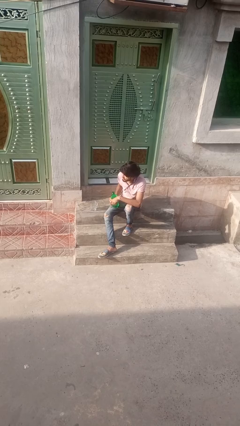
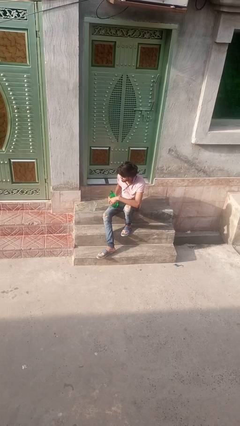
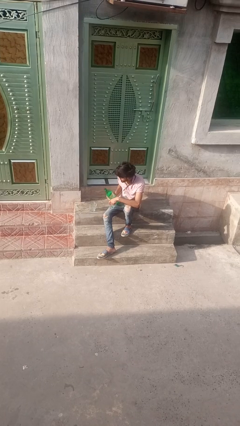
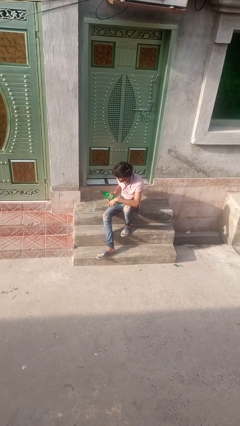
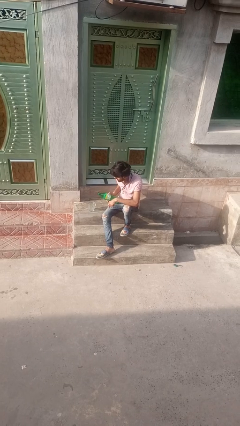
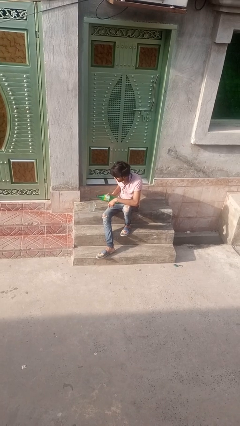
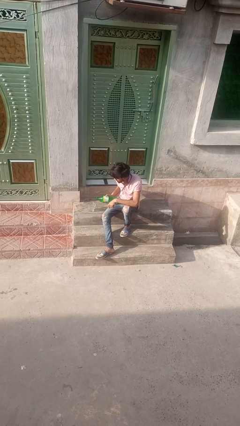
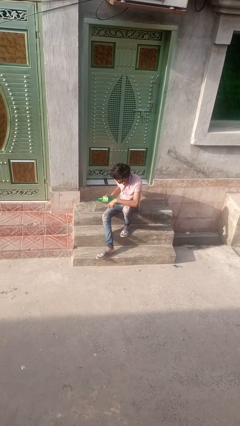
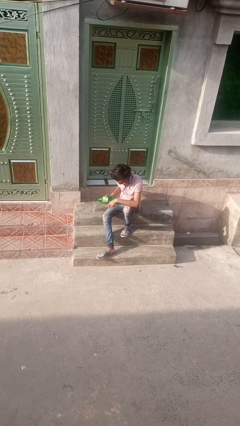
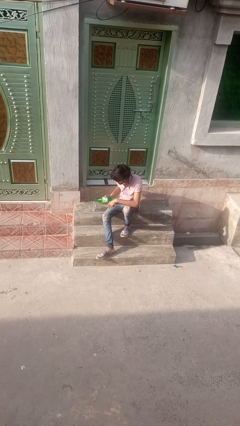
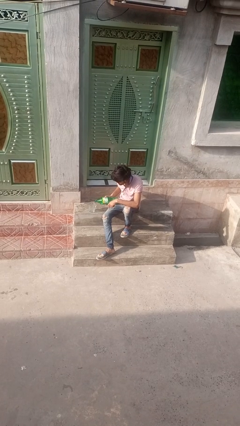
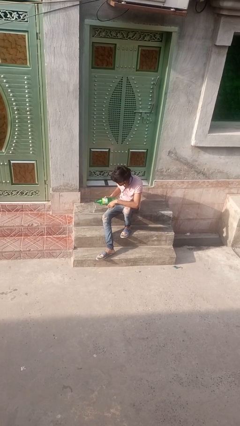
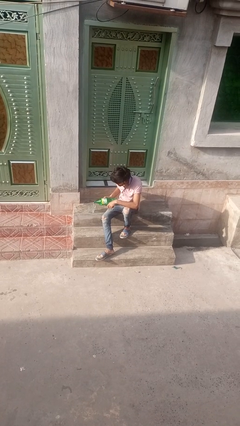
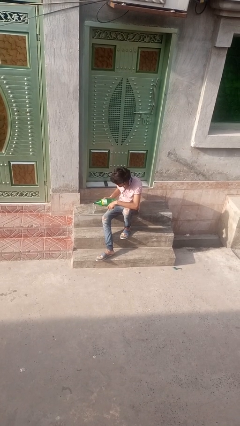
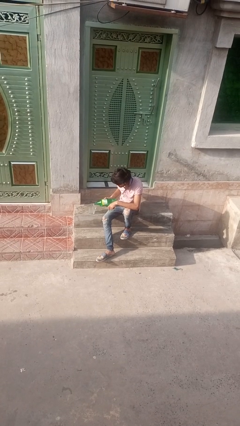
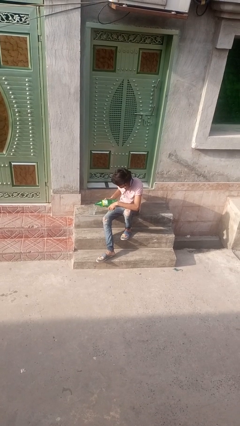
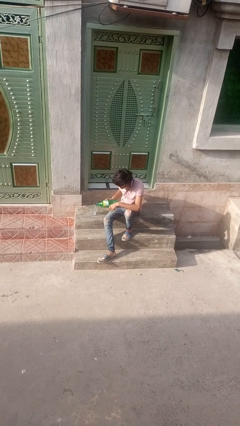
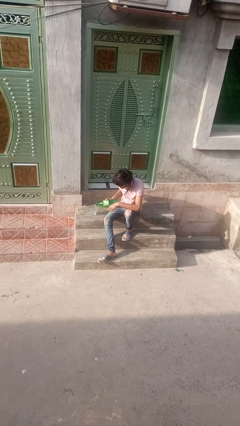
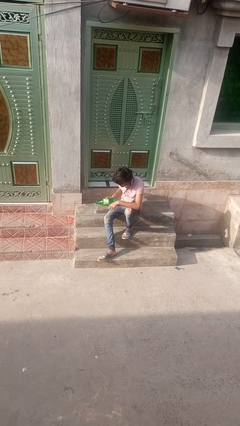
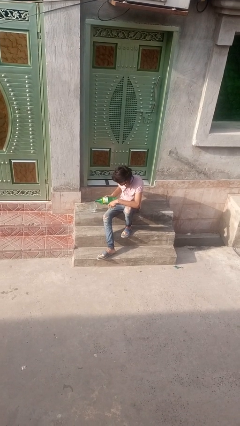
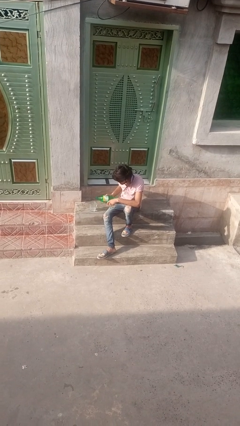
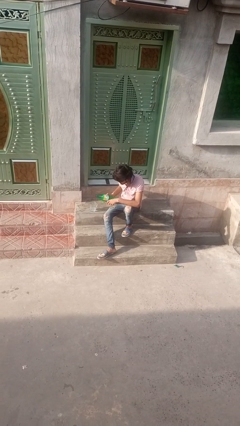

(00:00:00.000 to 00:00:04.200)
person pours liquid into cup

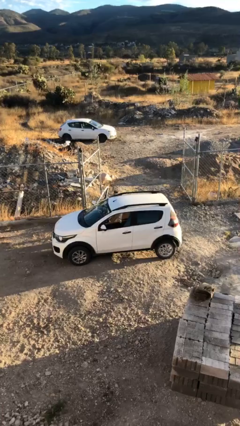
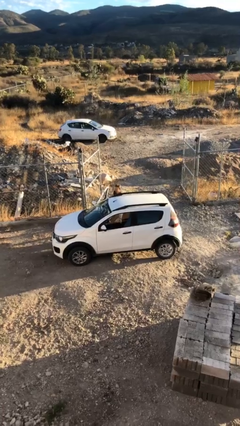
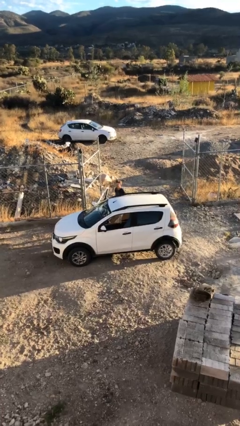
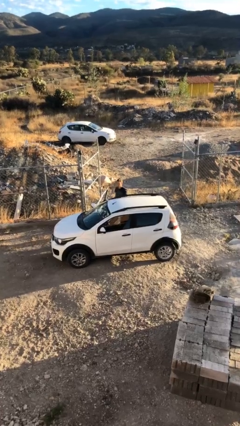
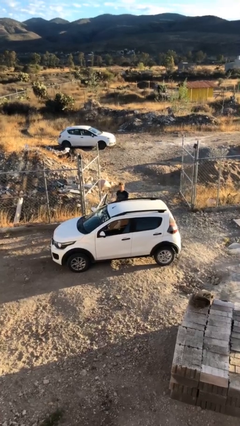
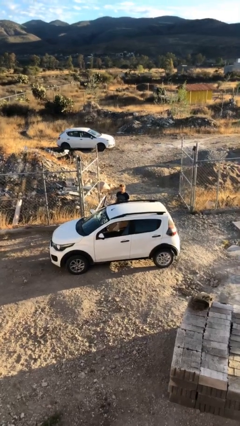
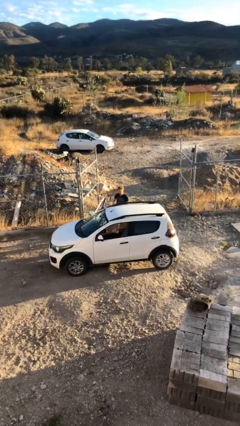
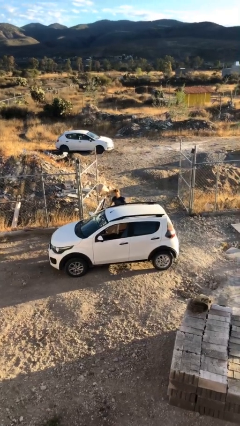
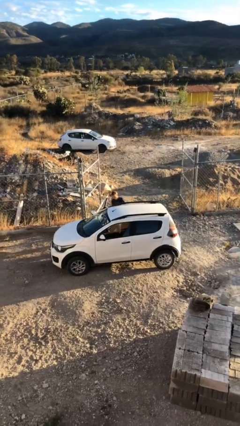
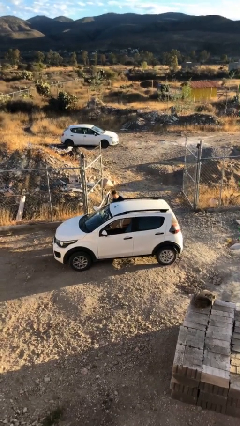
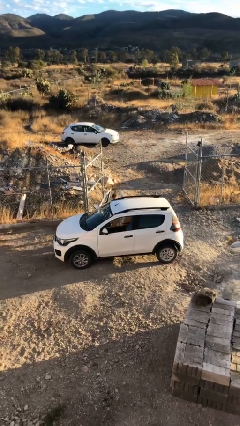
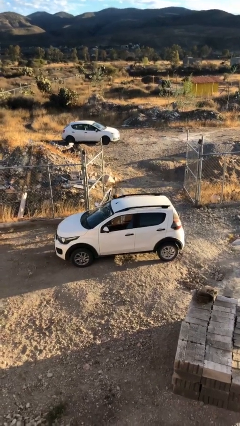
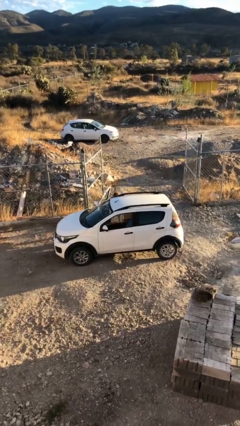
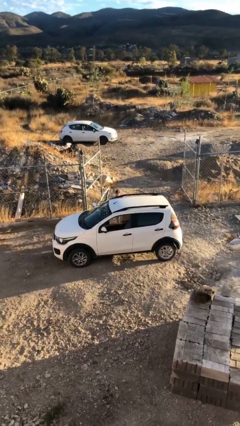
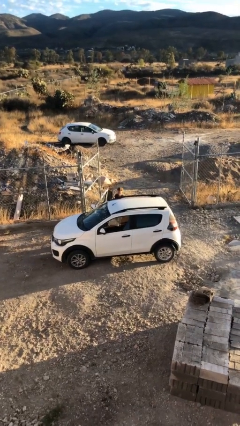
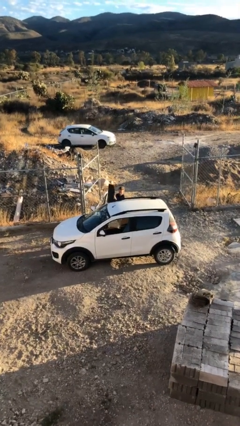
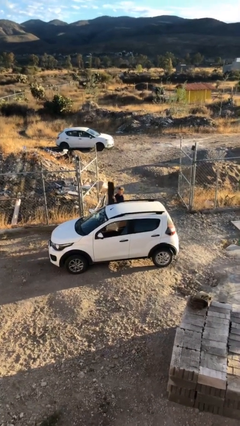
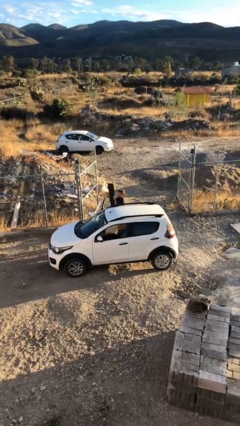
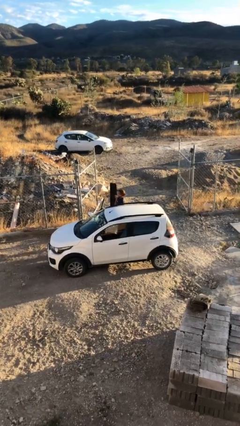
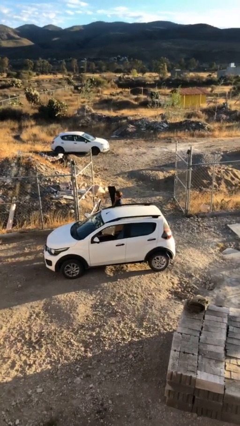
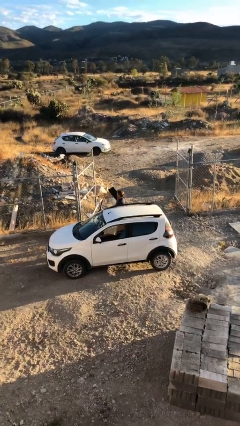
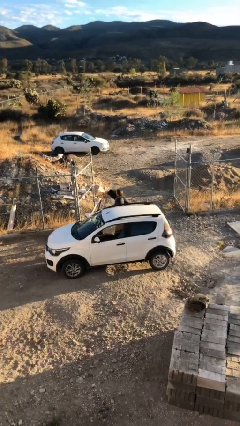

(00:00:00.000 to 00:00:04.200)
person unloads car

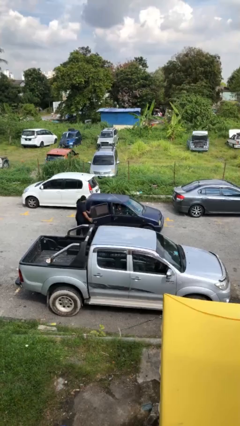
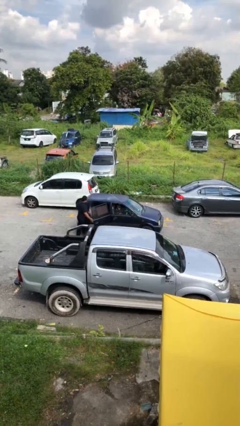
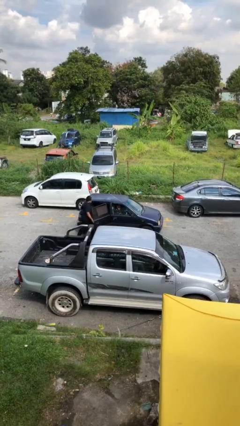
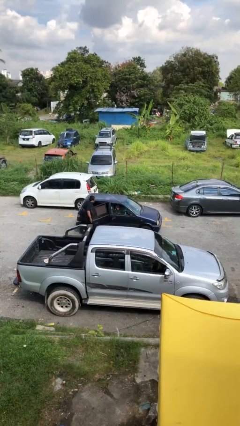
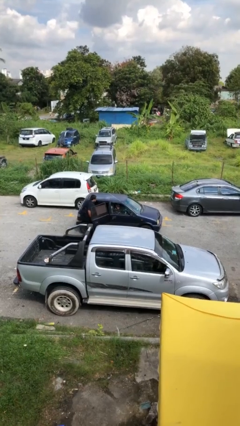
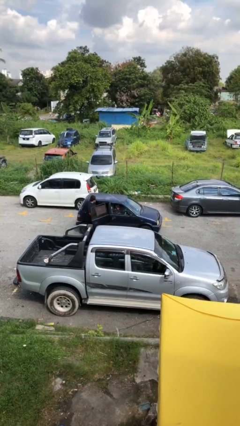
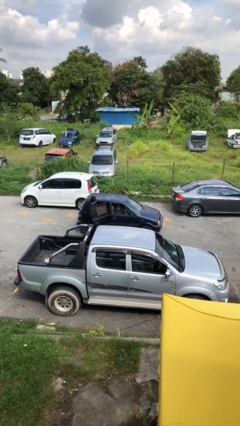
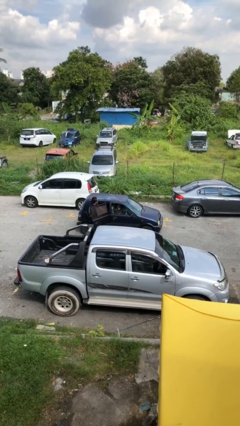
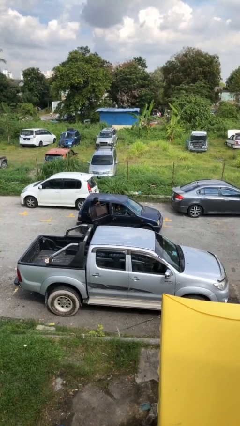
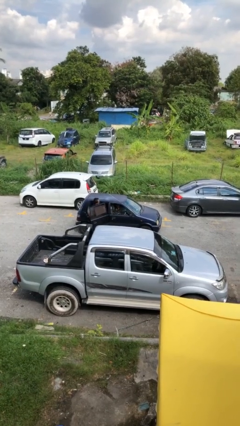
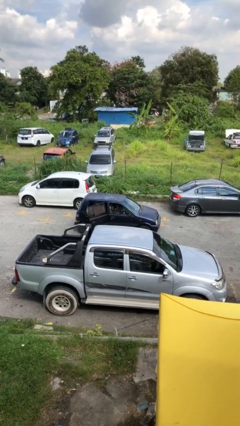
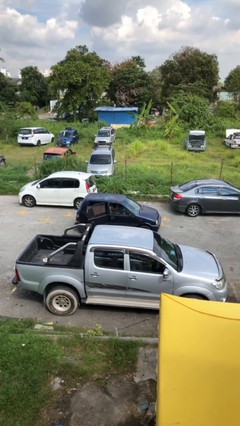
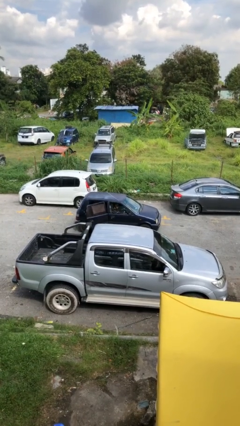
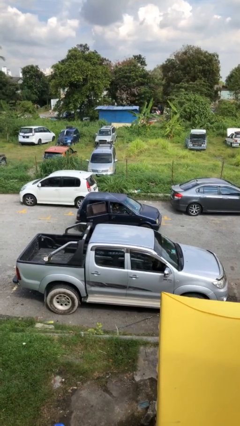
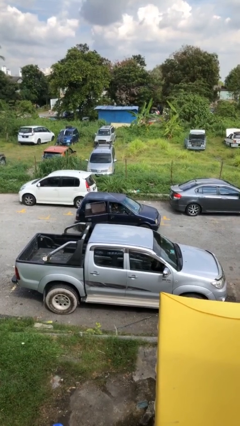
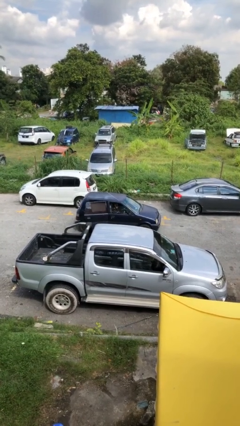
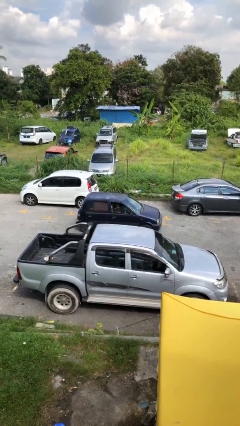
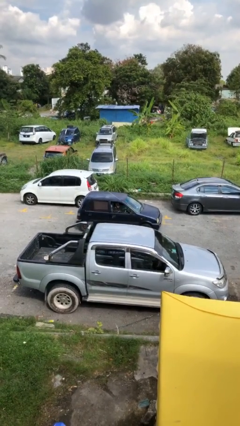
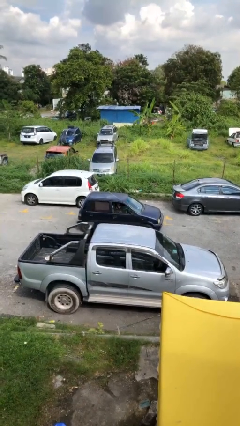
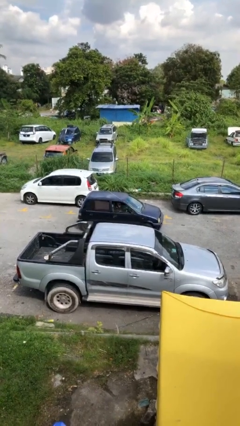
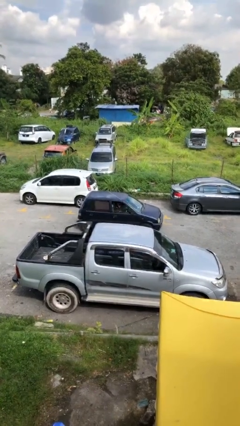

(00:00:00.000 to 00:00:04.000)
car picks up person

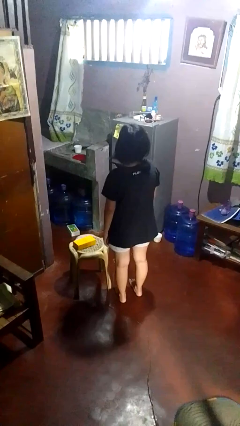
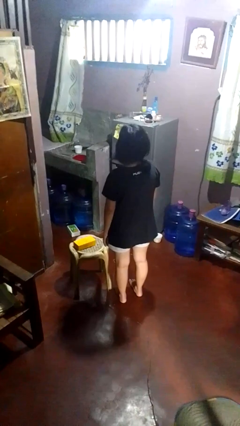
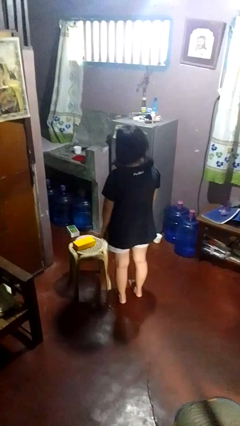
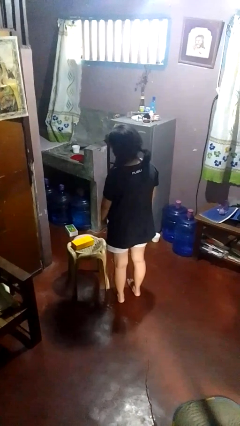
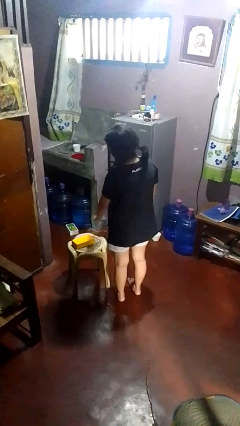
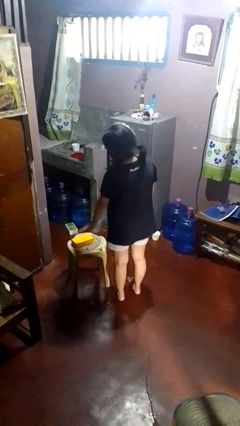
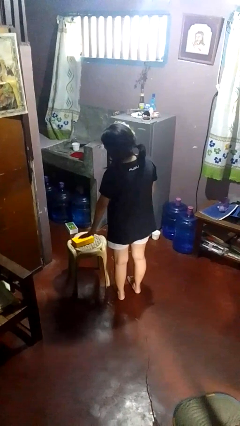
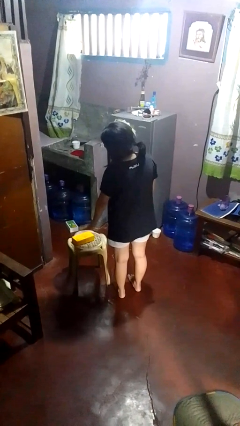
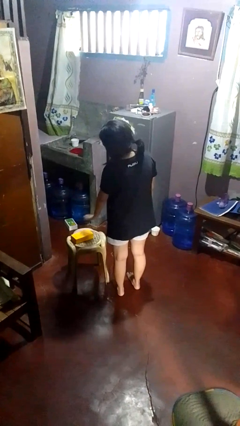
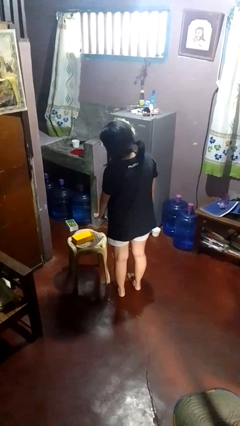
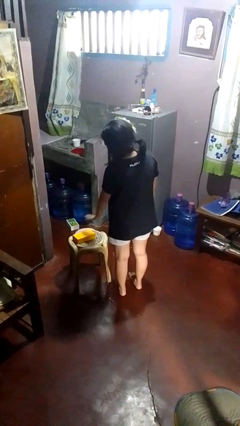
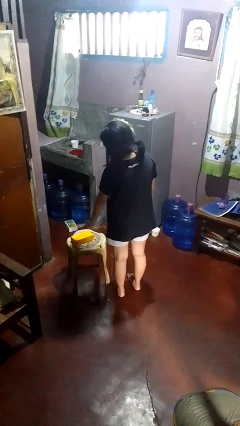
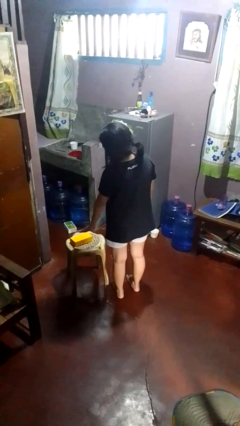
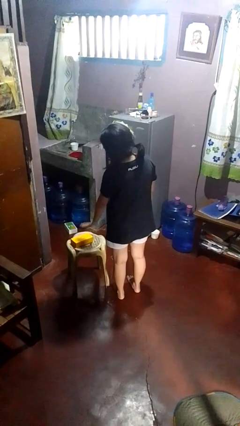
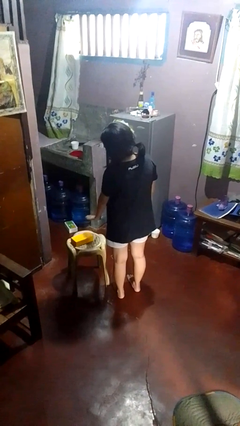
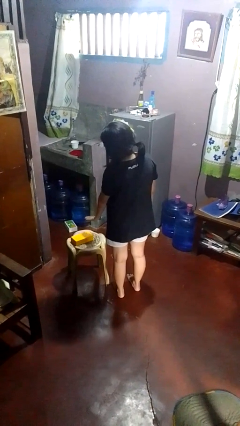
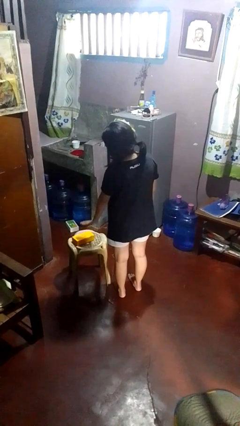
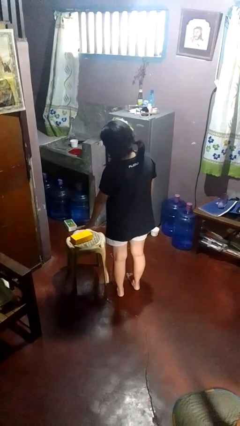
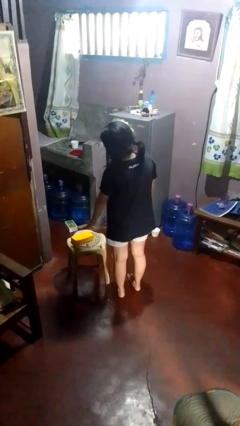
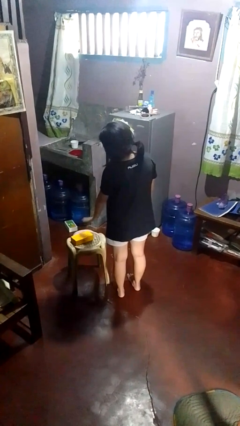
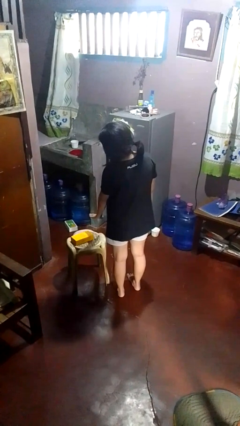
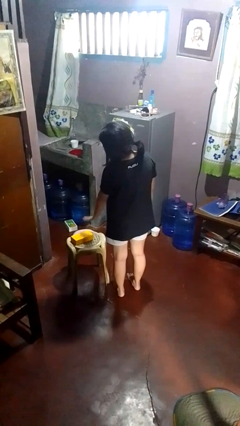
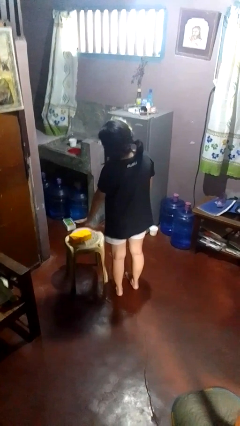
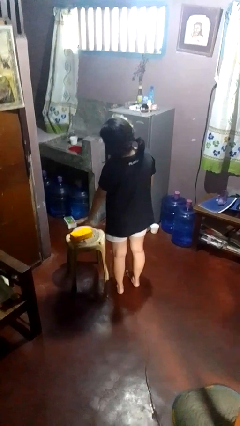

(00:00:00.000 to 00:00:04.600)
person waves hand over object

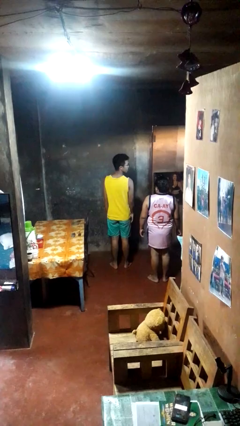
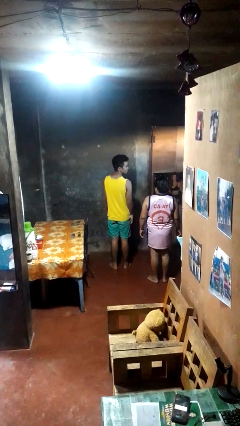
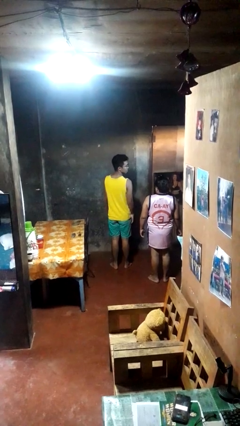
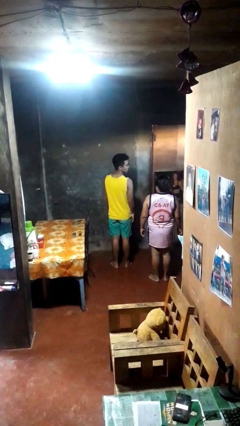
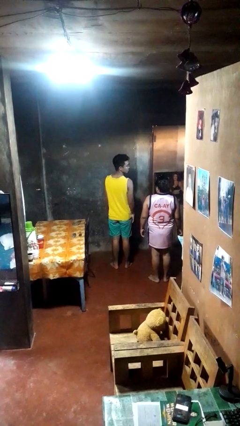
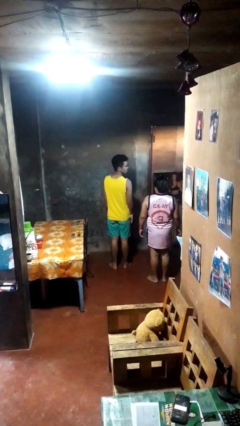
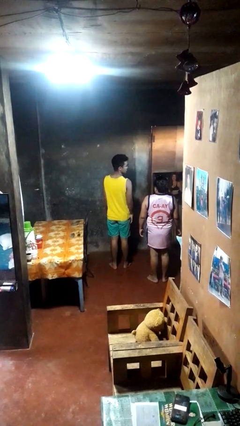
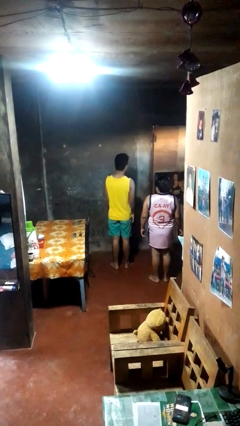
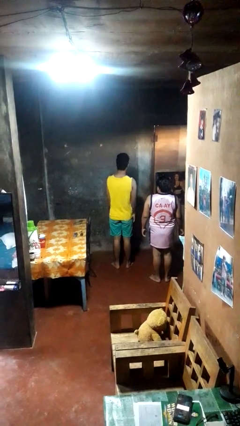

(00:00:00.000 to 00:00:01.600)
person looks over shoulder
